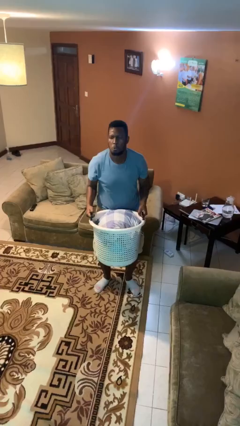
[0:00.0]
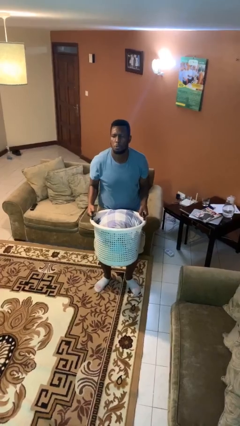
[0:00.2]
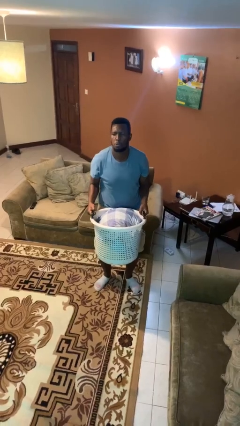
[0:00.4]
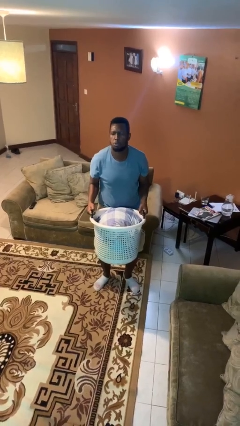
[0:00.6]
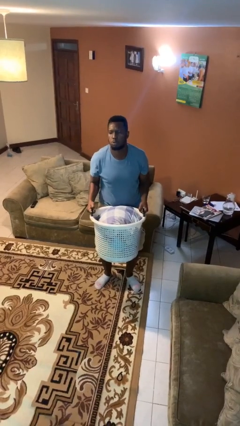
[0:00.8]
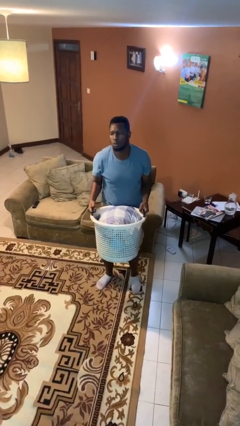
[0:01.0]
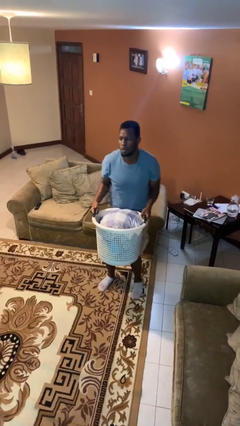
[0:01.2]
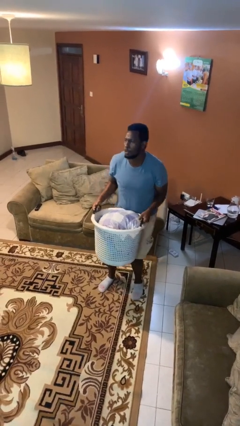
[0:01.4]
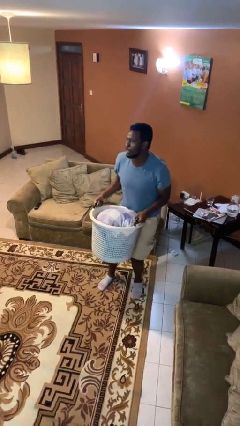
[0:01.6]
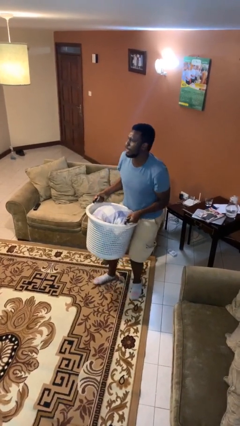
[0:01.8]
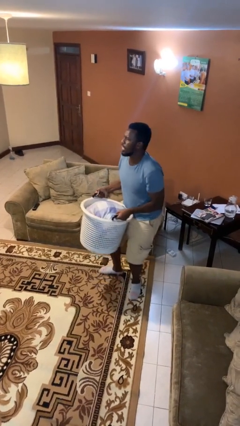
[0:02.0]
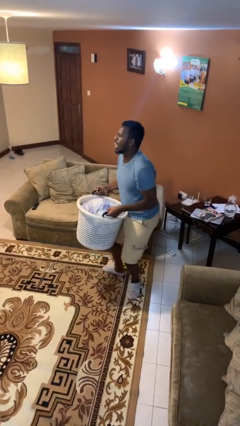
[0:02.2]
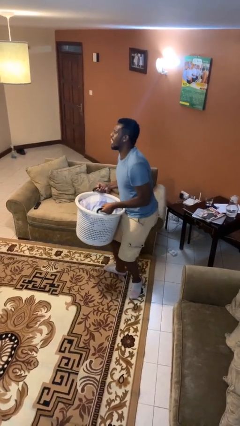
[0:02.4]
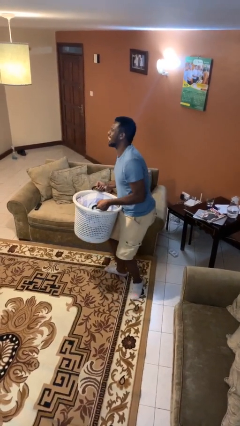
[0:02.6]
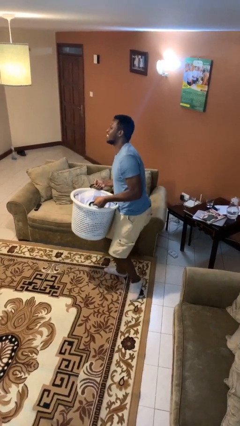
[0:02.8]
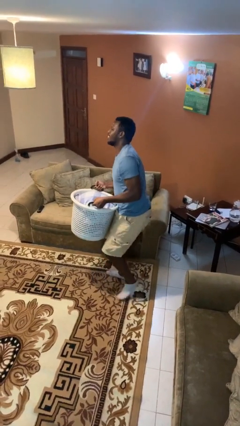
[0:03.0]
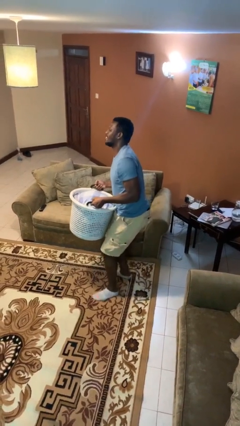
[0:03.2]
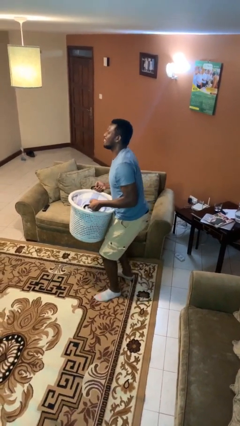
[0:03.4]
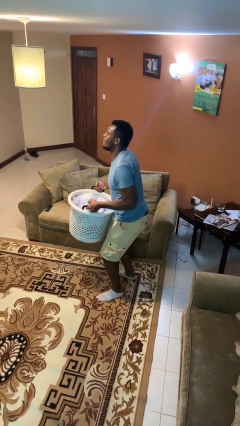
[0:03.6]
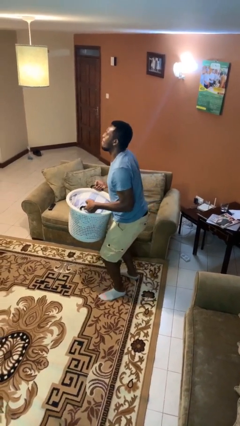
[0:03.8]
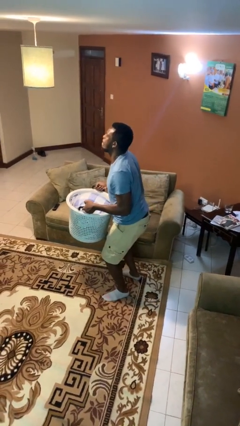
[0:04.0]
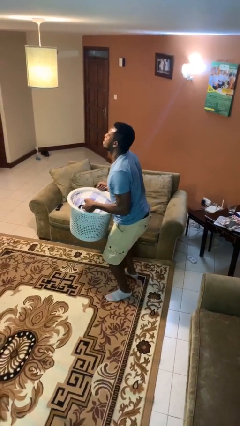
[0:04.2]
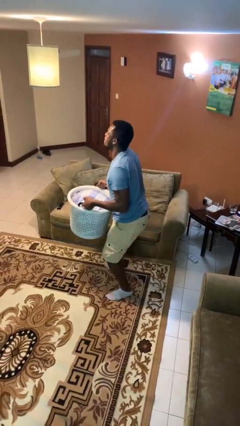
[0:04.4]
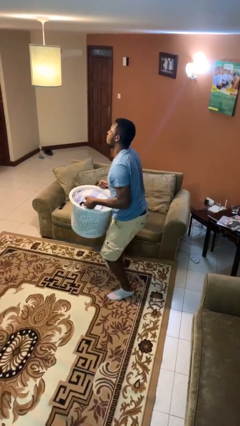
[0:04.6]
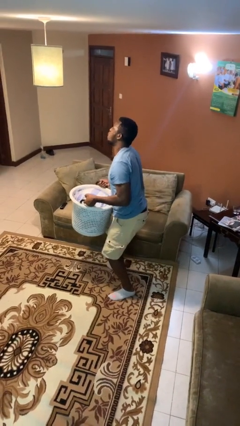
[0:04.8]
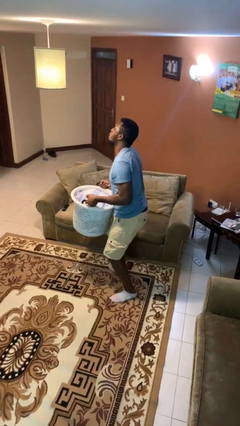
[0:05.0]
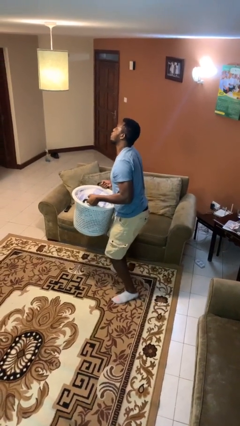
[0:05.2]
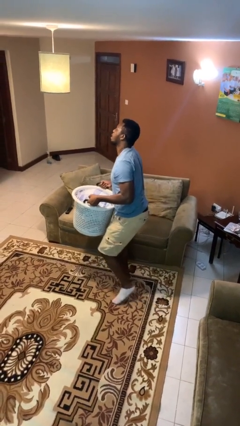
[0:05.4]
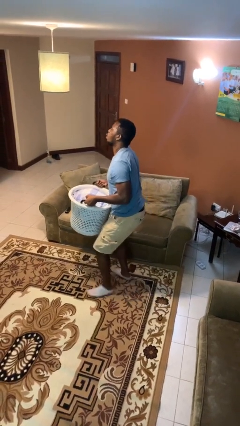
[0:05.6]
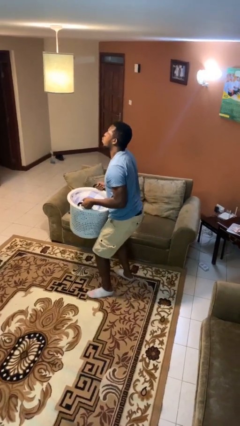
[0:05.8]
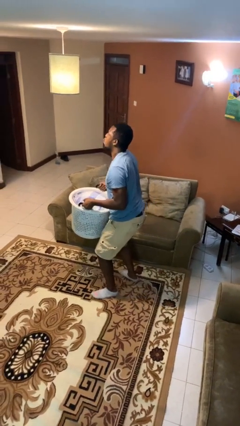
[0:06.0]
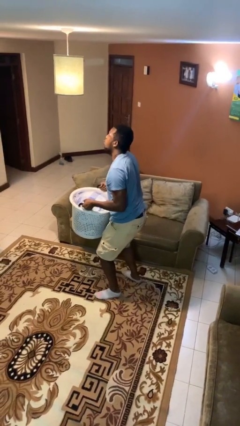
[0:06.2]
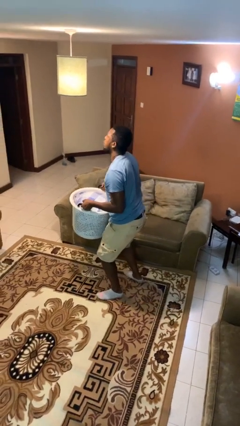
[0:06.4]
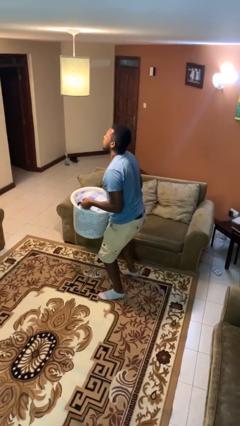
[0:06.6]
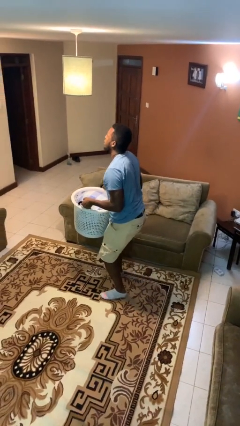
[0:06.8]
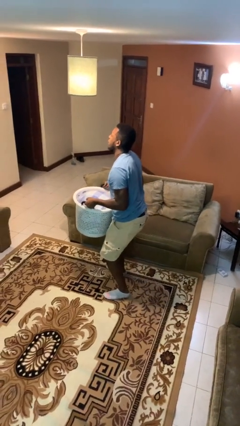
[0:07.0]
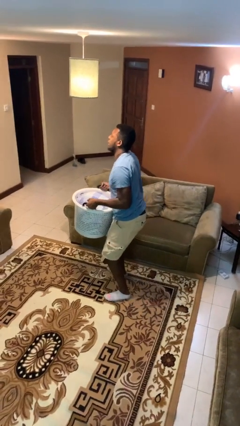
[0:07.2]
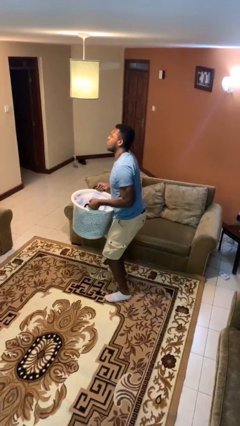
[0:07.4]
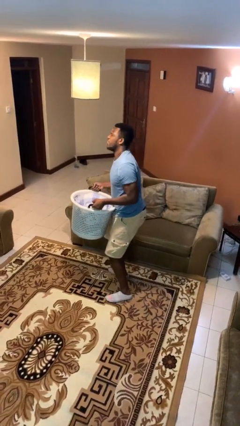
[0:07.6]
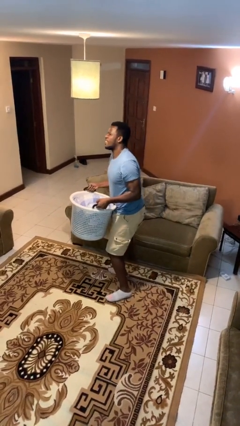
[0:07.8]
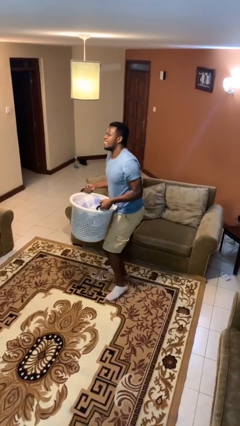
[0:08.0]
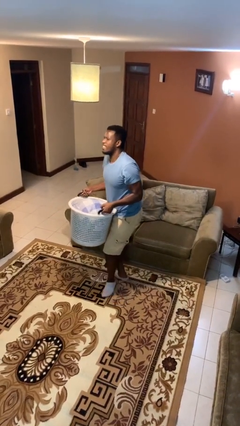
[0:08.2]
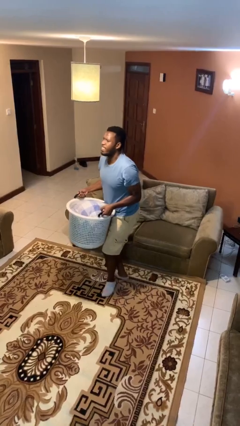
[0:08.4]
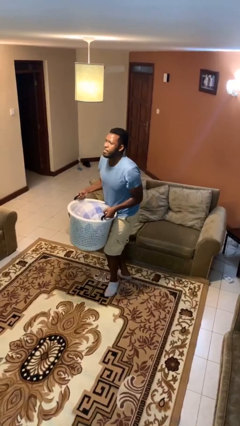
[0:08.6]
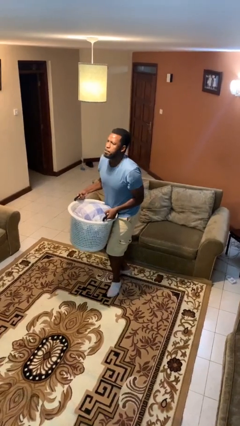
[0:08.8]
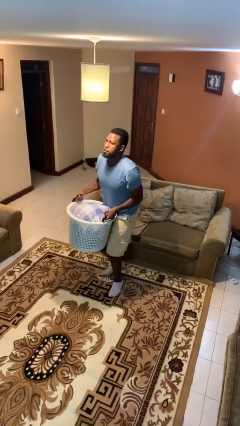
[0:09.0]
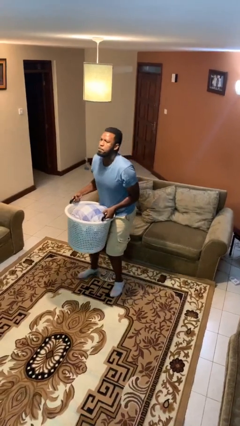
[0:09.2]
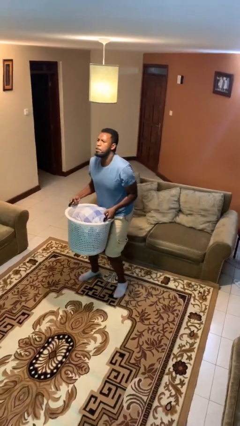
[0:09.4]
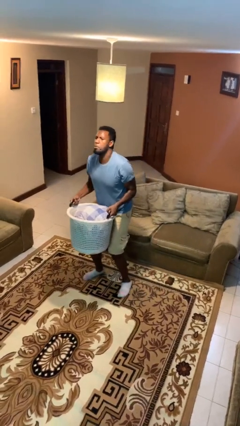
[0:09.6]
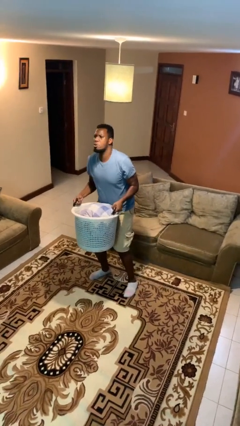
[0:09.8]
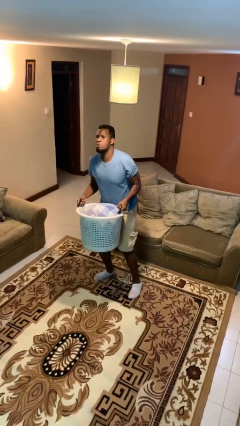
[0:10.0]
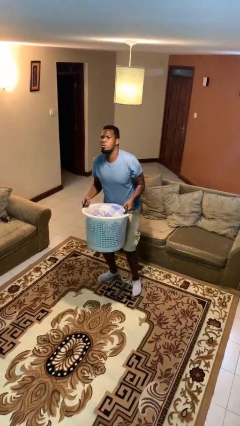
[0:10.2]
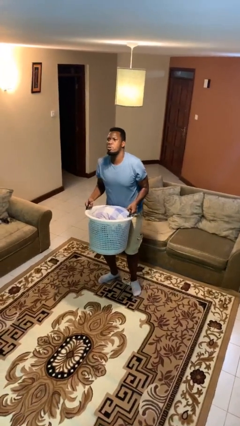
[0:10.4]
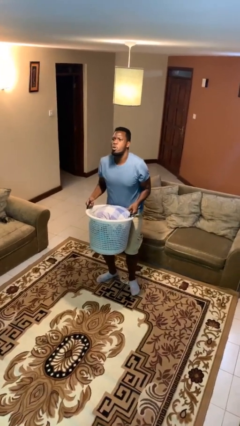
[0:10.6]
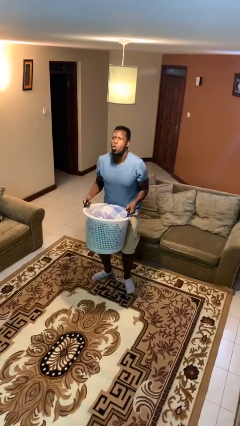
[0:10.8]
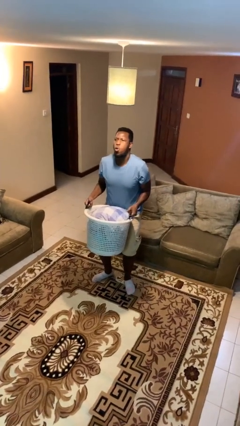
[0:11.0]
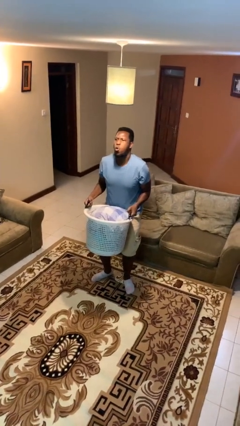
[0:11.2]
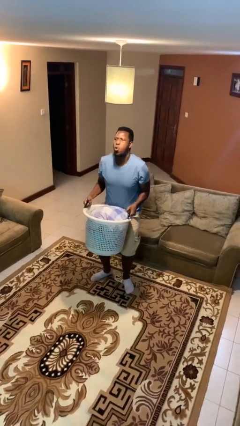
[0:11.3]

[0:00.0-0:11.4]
person carries heavy object

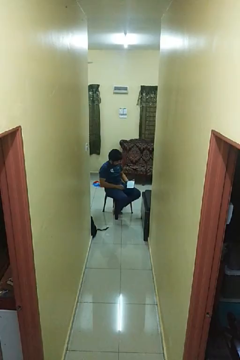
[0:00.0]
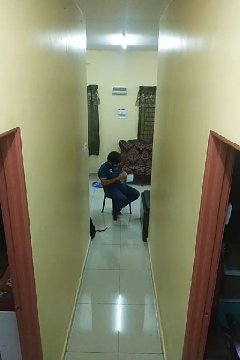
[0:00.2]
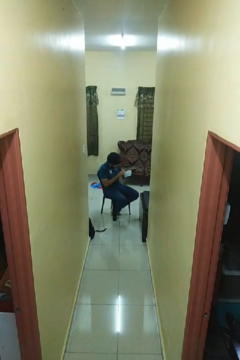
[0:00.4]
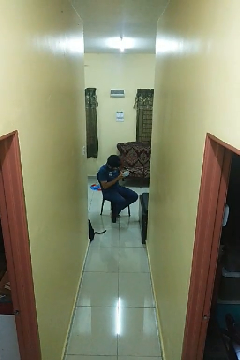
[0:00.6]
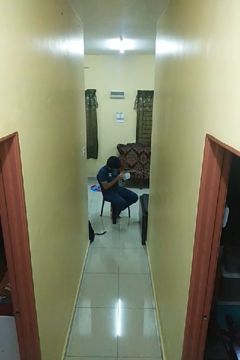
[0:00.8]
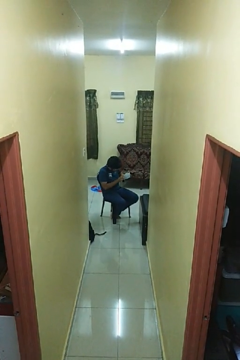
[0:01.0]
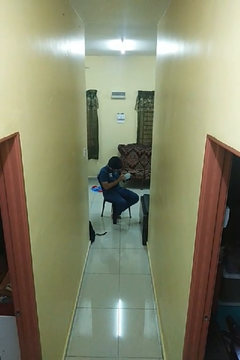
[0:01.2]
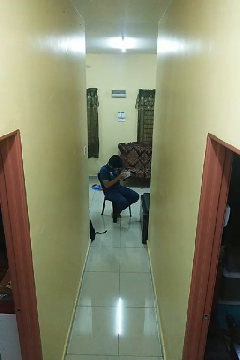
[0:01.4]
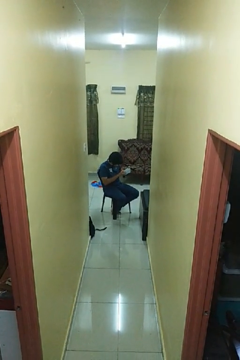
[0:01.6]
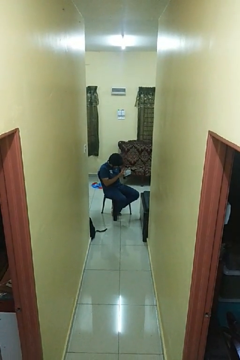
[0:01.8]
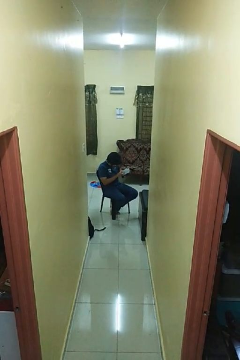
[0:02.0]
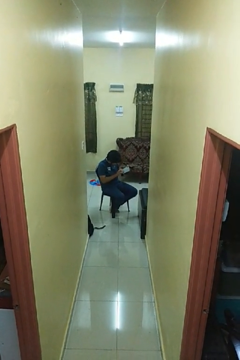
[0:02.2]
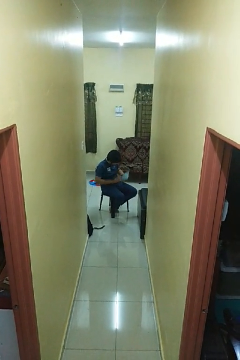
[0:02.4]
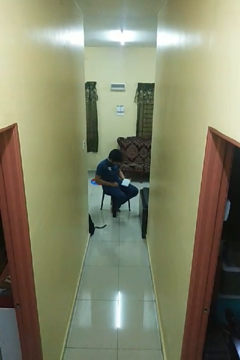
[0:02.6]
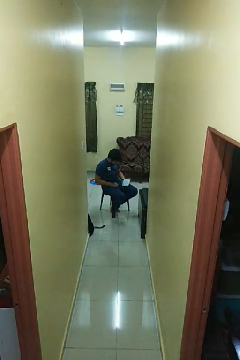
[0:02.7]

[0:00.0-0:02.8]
person interacts with tablet

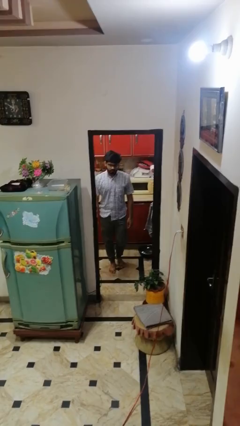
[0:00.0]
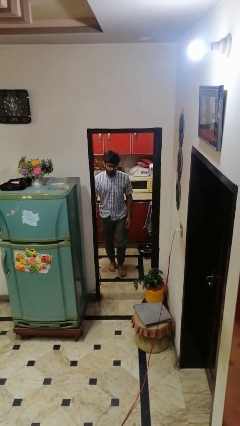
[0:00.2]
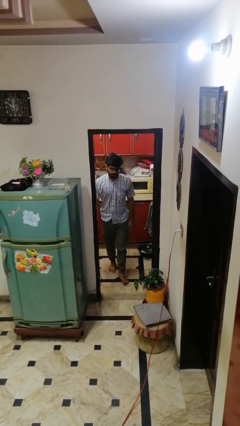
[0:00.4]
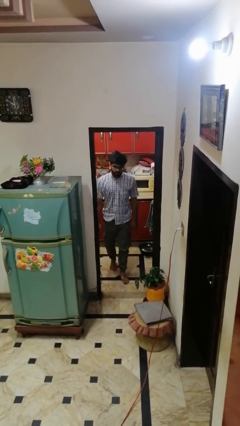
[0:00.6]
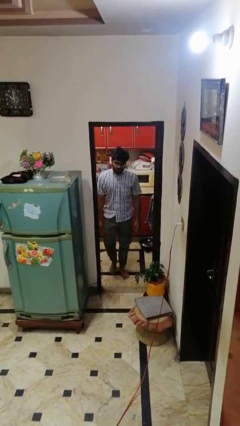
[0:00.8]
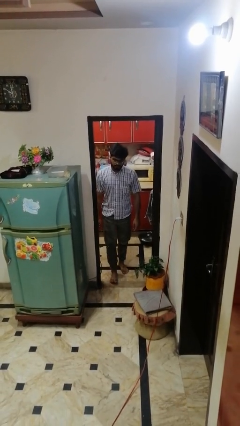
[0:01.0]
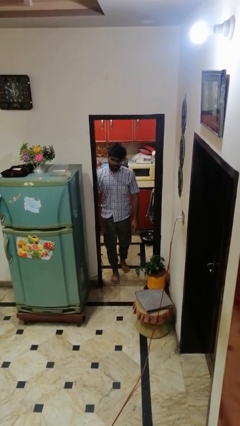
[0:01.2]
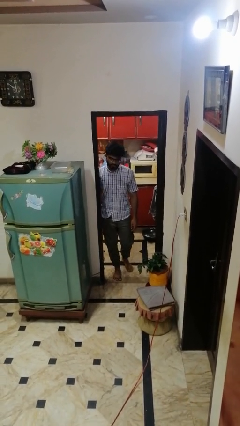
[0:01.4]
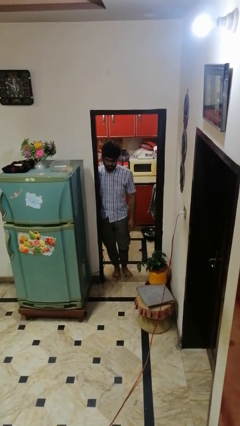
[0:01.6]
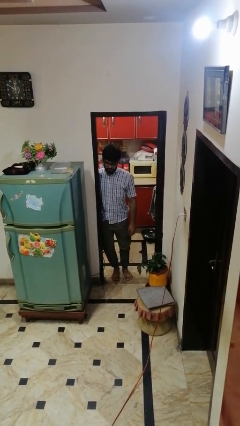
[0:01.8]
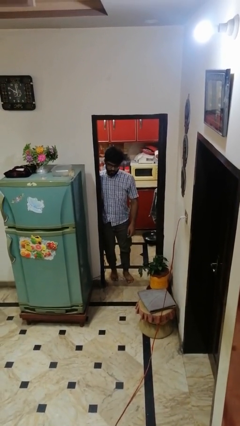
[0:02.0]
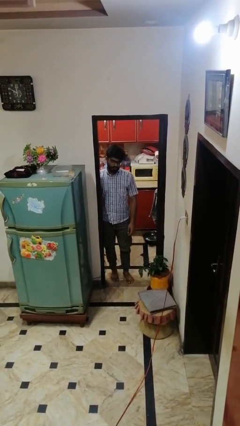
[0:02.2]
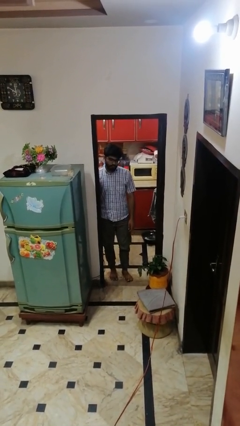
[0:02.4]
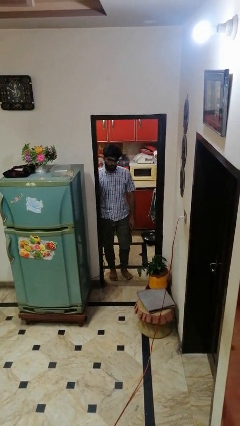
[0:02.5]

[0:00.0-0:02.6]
person bumps into wall

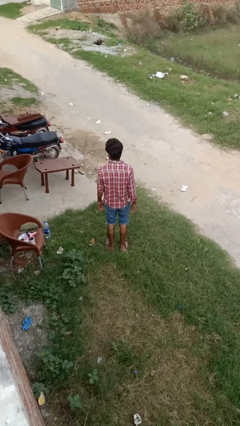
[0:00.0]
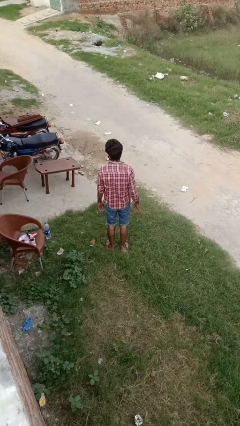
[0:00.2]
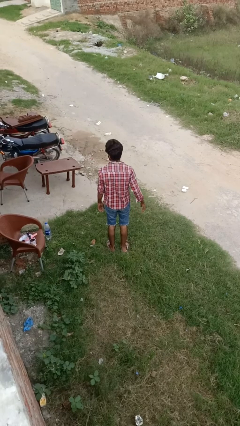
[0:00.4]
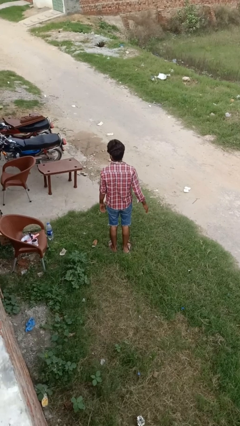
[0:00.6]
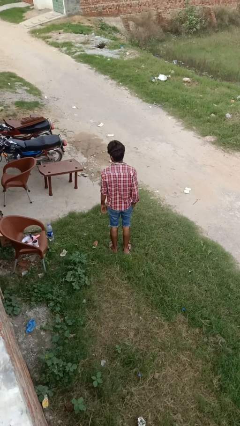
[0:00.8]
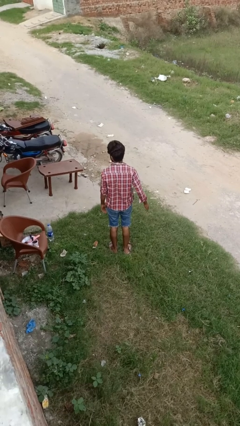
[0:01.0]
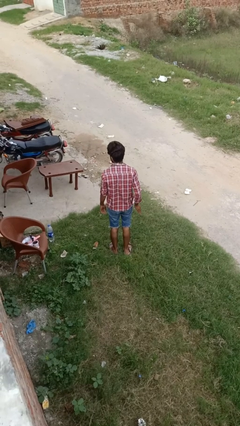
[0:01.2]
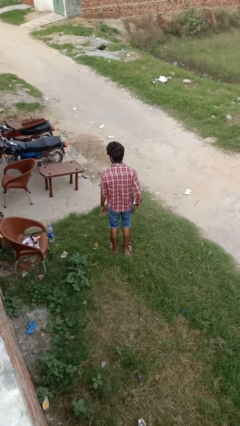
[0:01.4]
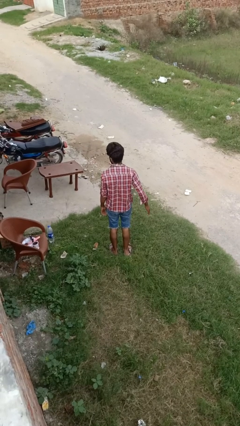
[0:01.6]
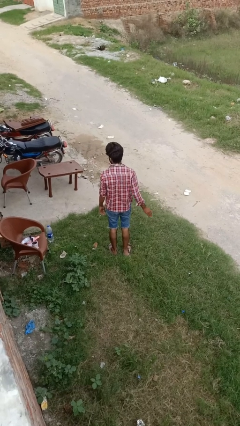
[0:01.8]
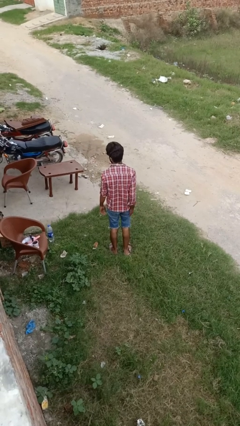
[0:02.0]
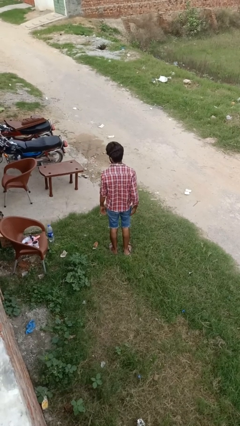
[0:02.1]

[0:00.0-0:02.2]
person snaps fingers
